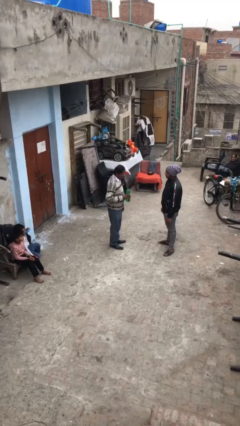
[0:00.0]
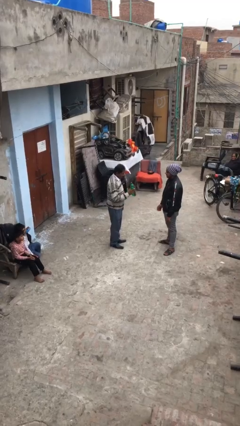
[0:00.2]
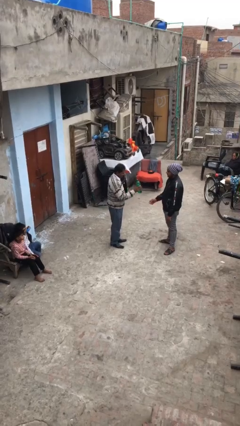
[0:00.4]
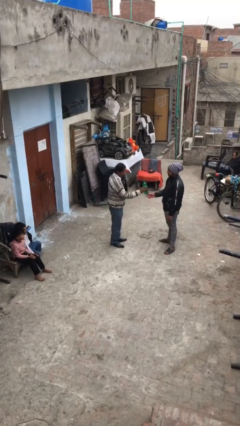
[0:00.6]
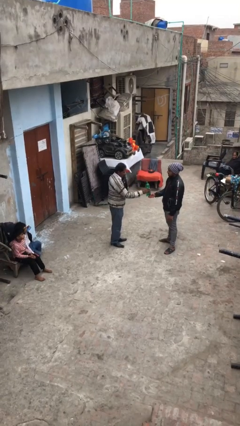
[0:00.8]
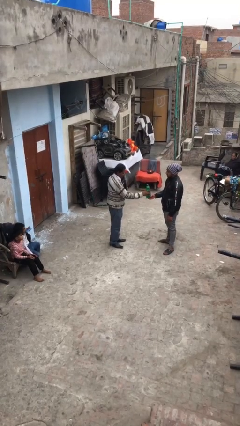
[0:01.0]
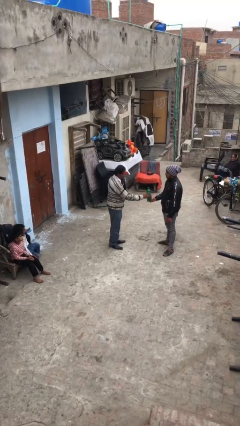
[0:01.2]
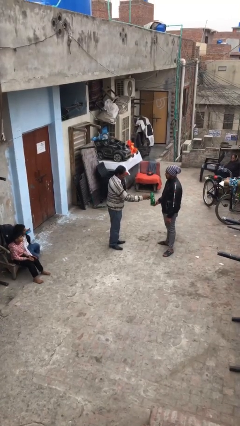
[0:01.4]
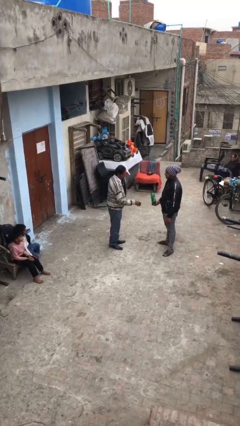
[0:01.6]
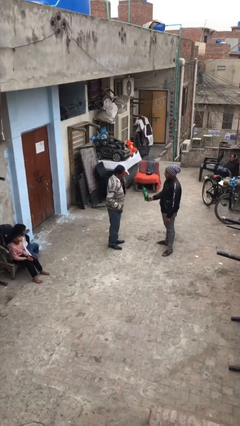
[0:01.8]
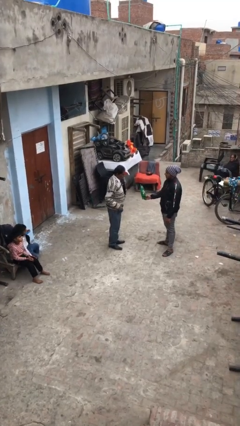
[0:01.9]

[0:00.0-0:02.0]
person transfers object to person

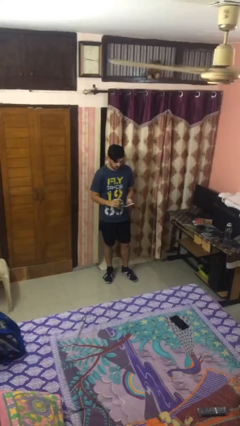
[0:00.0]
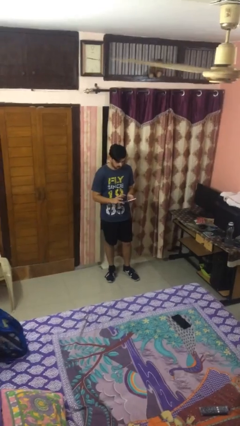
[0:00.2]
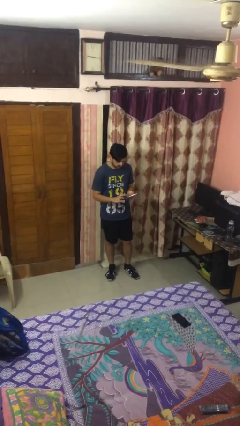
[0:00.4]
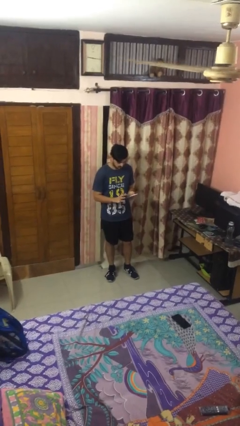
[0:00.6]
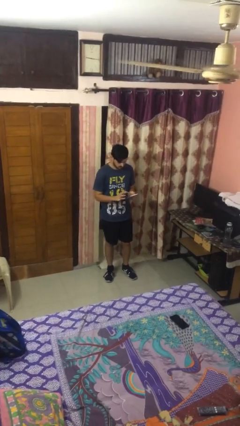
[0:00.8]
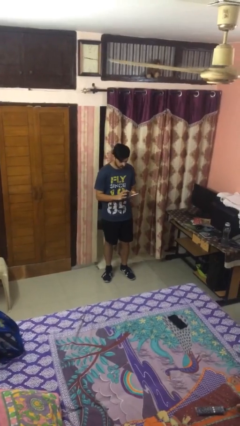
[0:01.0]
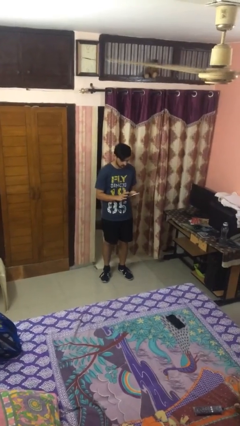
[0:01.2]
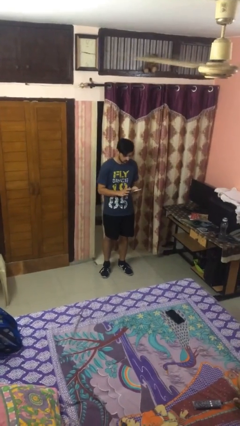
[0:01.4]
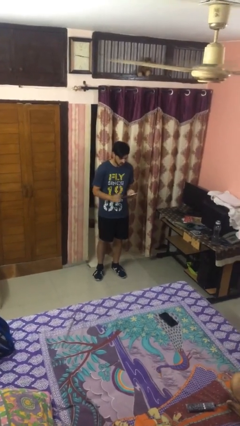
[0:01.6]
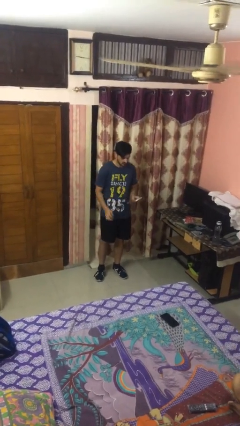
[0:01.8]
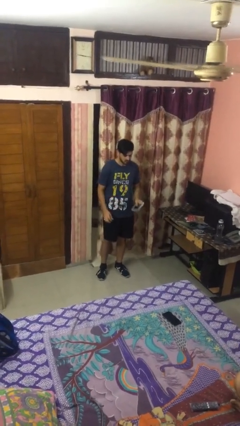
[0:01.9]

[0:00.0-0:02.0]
person interacts with tablet

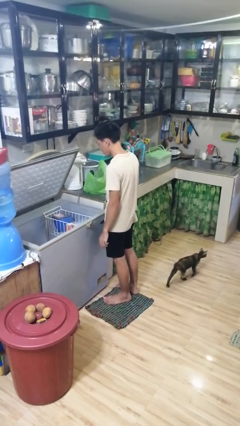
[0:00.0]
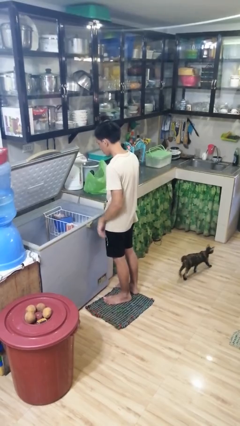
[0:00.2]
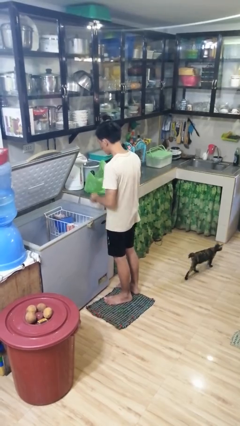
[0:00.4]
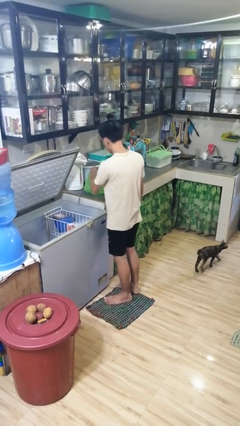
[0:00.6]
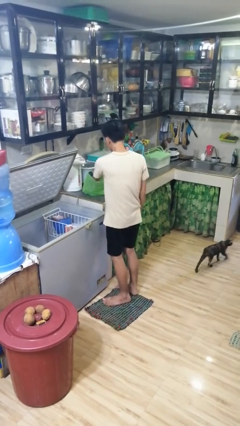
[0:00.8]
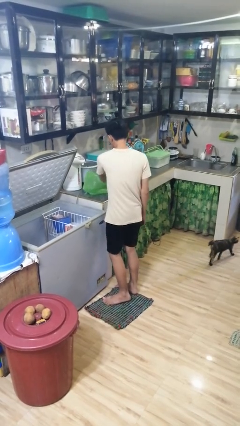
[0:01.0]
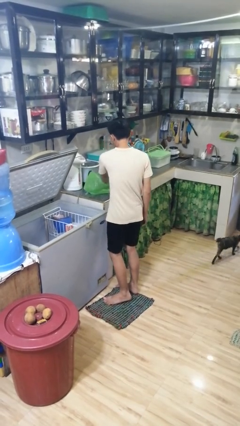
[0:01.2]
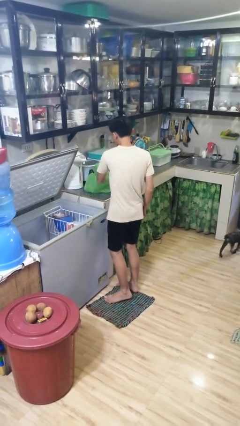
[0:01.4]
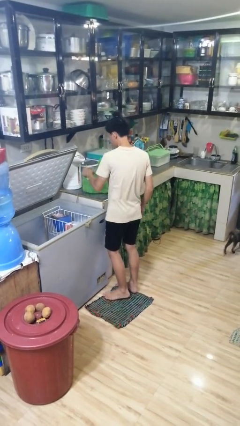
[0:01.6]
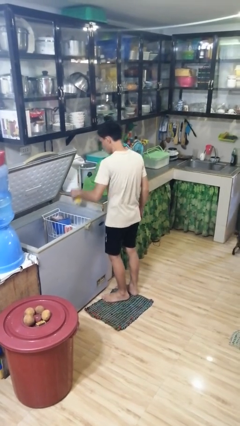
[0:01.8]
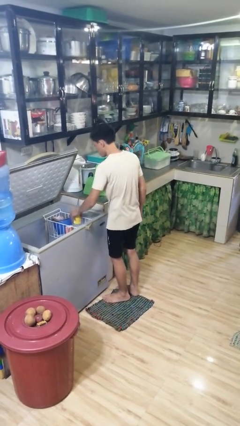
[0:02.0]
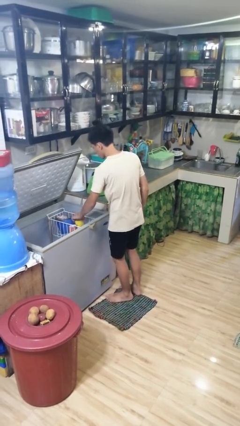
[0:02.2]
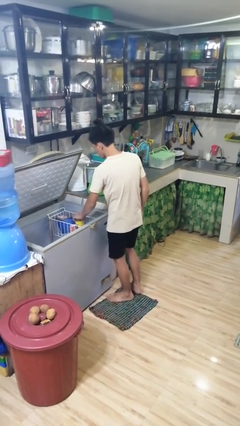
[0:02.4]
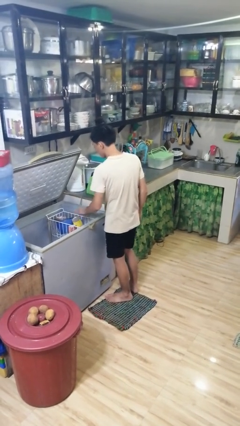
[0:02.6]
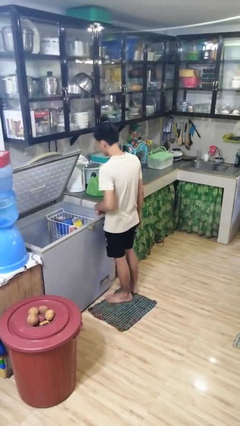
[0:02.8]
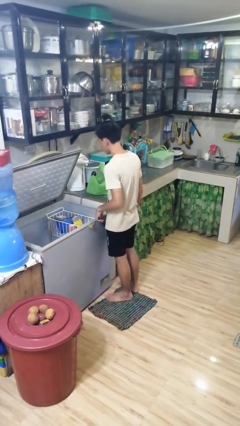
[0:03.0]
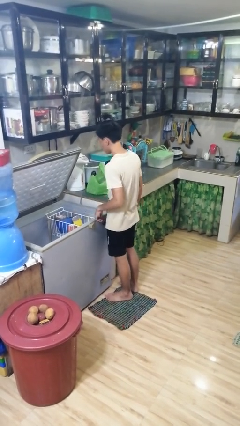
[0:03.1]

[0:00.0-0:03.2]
person loads groceries into refrigerator

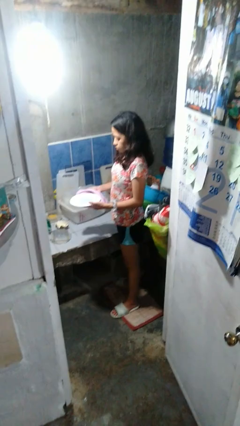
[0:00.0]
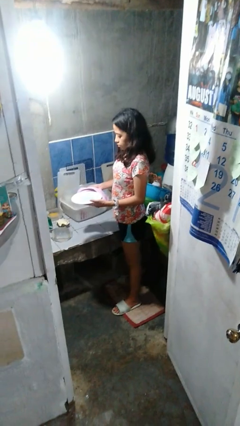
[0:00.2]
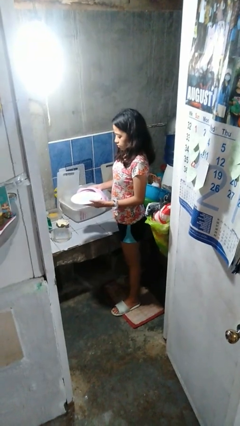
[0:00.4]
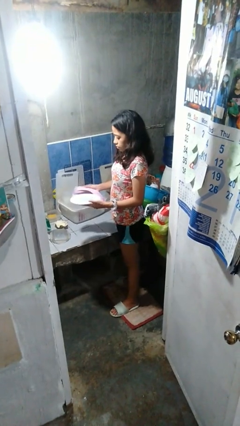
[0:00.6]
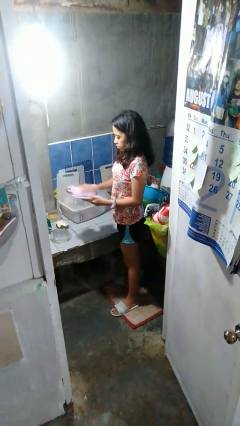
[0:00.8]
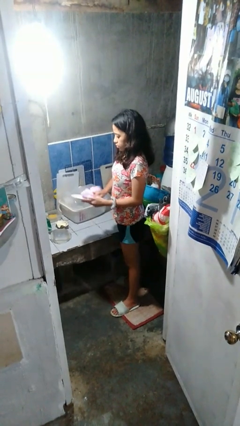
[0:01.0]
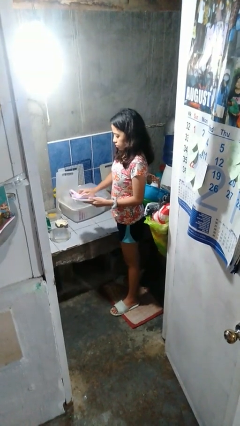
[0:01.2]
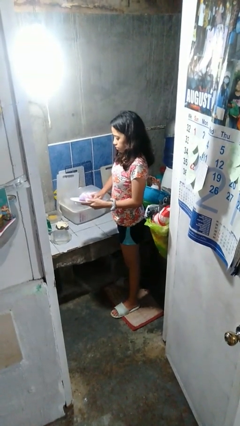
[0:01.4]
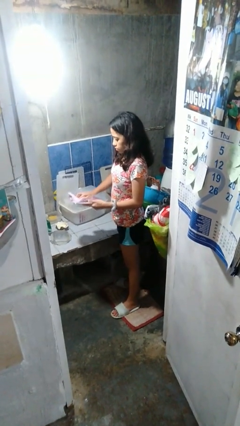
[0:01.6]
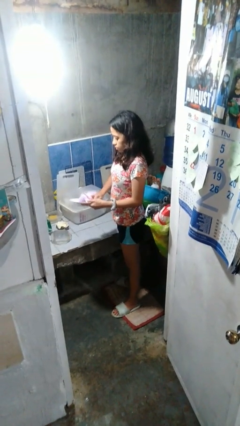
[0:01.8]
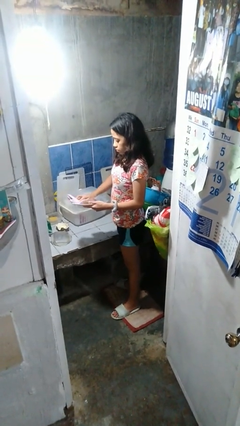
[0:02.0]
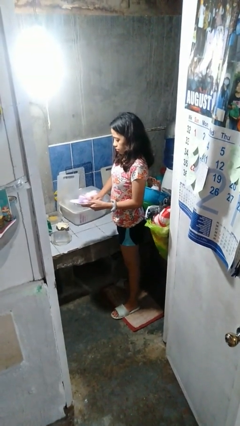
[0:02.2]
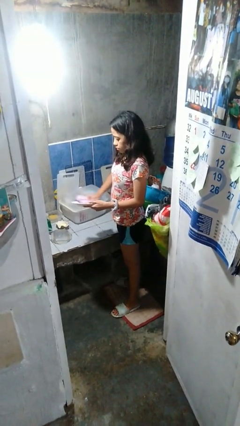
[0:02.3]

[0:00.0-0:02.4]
person dries dish

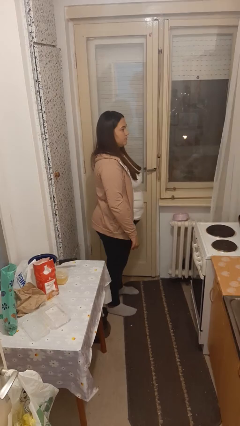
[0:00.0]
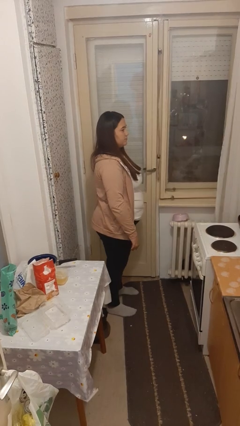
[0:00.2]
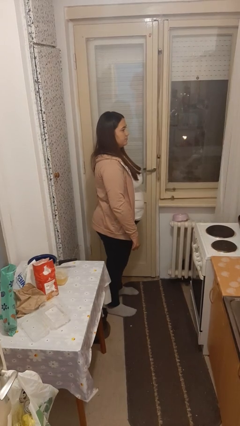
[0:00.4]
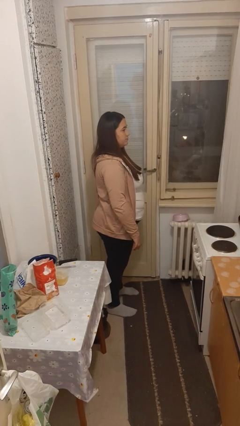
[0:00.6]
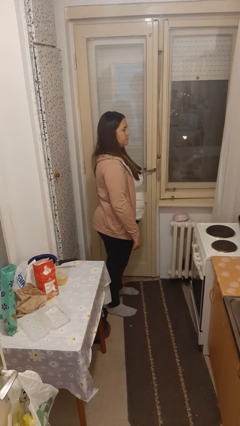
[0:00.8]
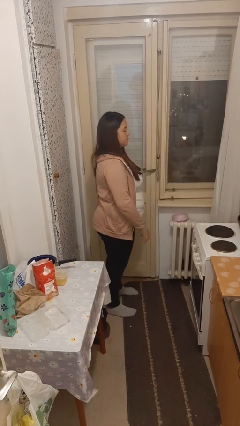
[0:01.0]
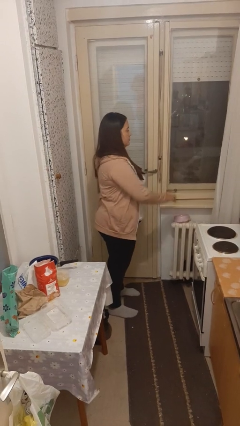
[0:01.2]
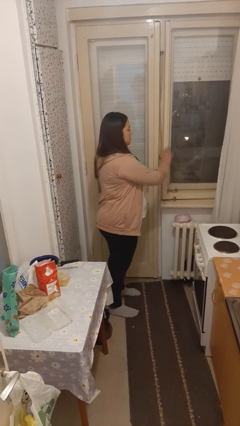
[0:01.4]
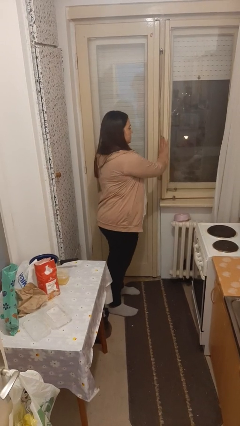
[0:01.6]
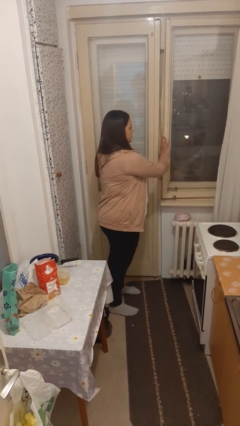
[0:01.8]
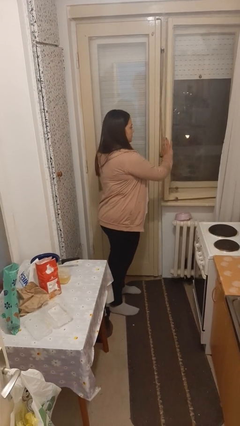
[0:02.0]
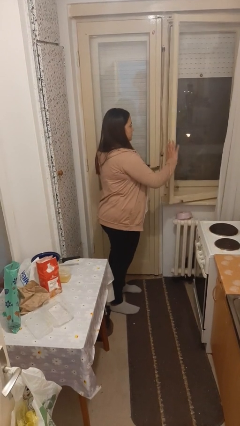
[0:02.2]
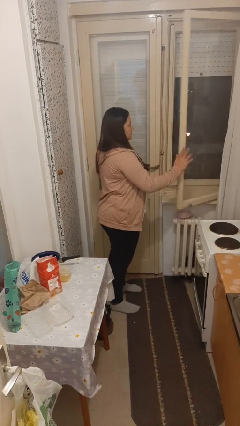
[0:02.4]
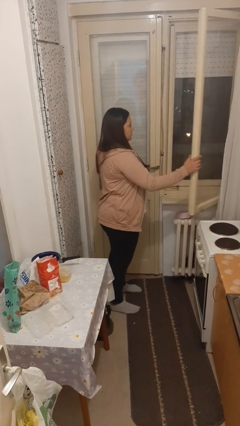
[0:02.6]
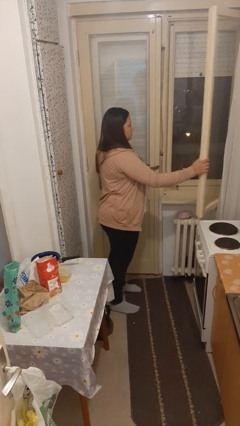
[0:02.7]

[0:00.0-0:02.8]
person opens home window

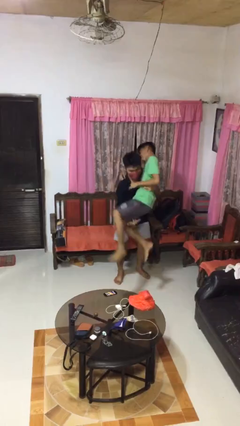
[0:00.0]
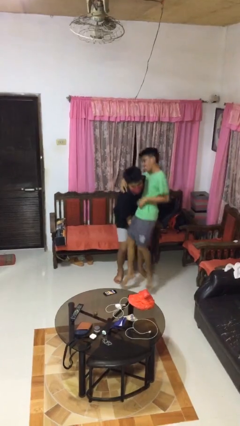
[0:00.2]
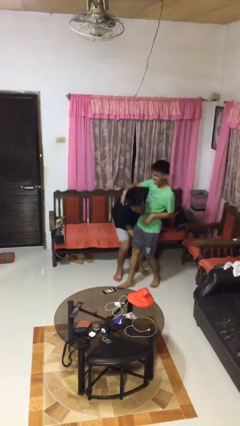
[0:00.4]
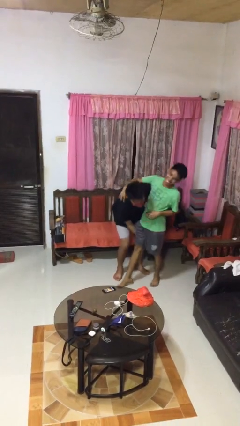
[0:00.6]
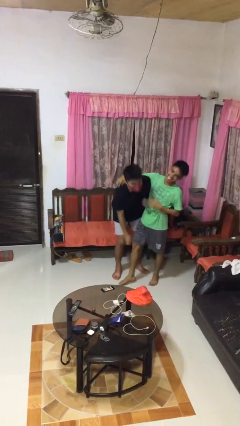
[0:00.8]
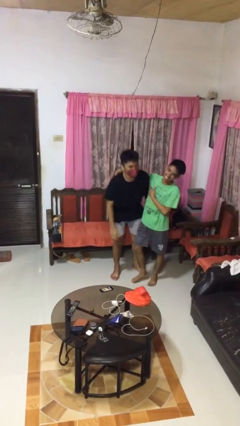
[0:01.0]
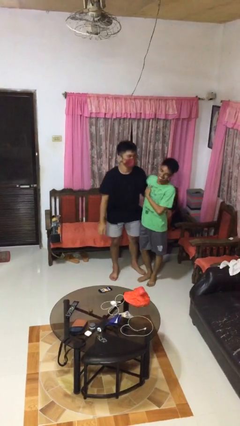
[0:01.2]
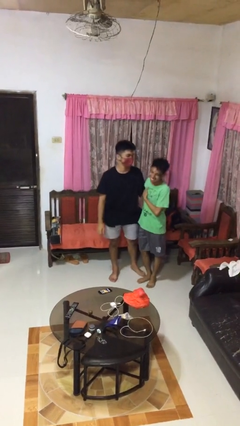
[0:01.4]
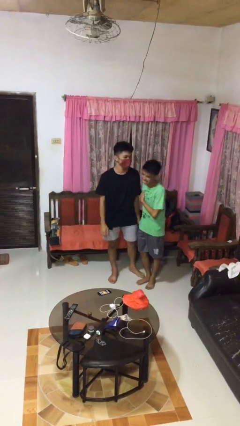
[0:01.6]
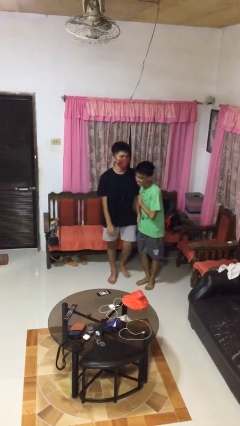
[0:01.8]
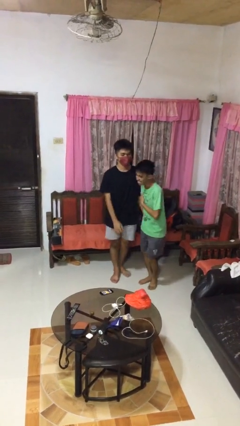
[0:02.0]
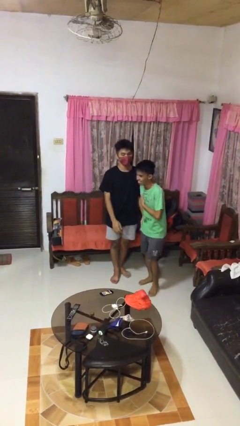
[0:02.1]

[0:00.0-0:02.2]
person puts down person

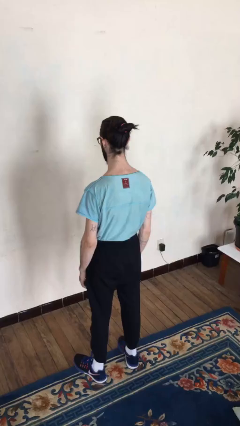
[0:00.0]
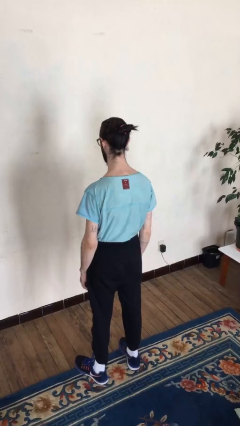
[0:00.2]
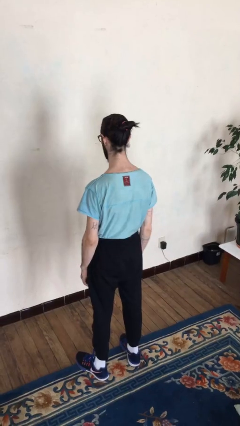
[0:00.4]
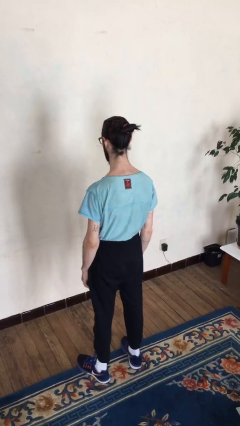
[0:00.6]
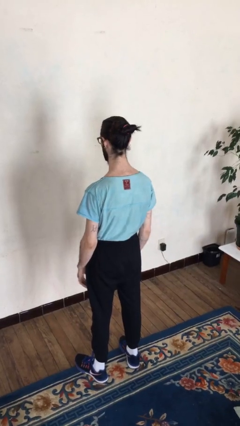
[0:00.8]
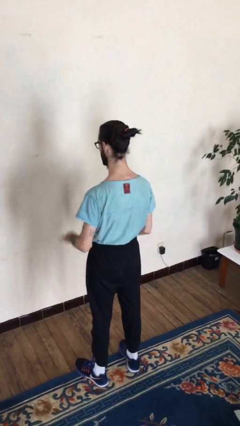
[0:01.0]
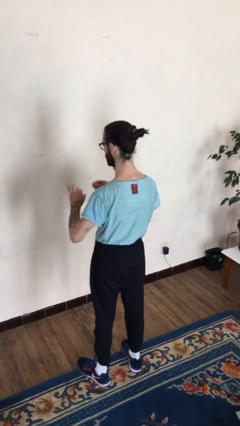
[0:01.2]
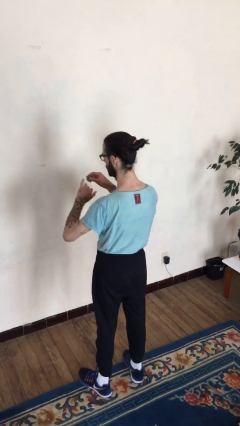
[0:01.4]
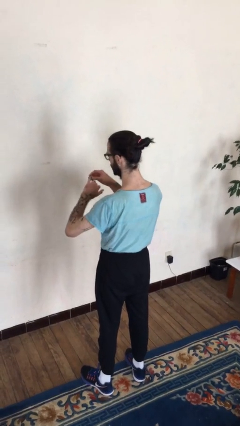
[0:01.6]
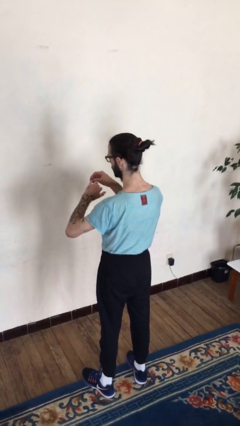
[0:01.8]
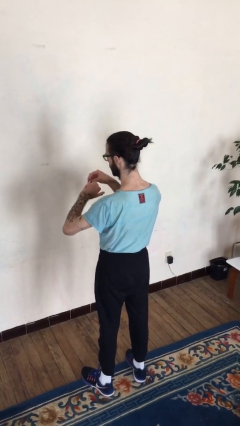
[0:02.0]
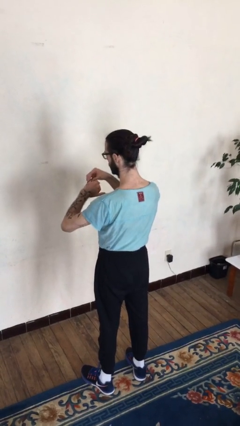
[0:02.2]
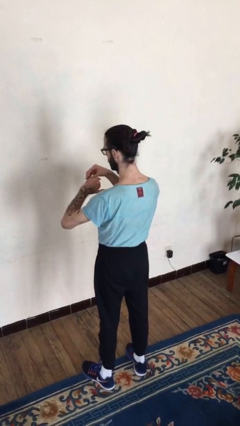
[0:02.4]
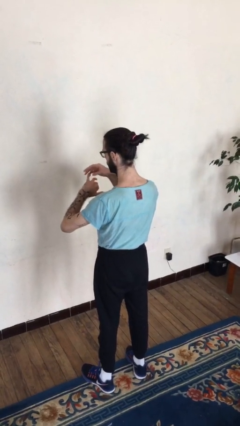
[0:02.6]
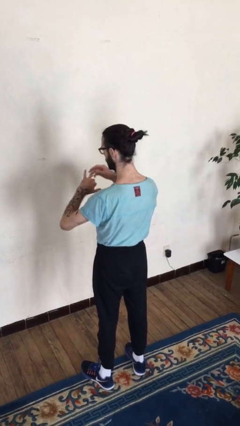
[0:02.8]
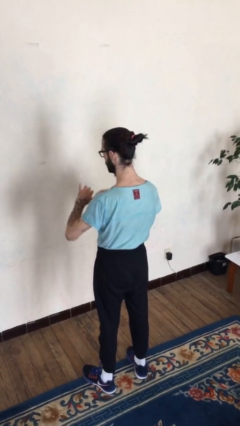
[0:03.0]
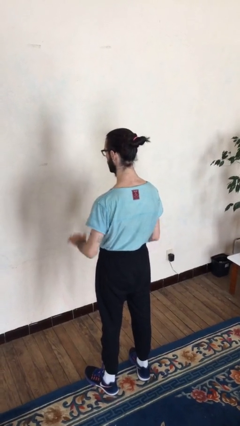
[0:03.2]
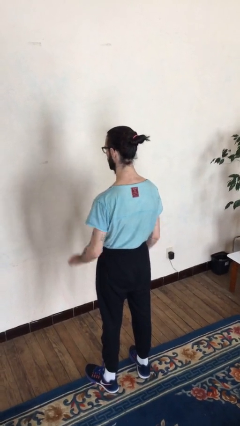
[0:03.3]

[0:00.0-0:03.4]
person puts on ring
